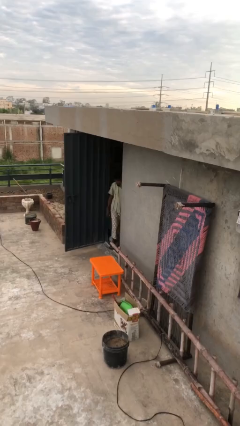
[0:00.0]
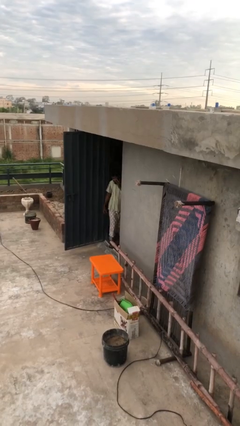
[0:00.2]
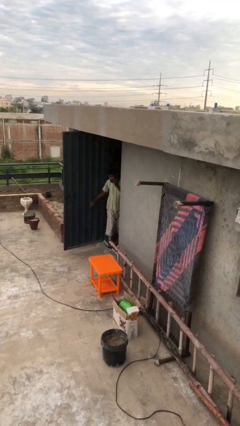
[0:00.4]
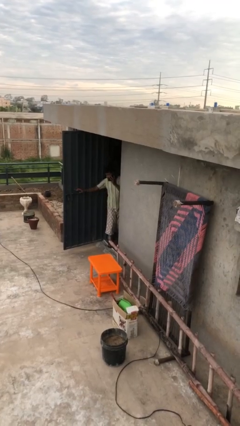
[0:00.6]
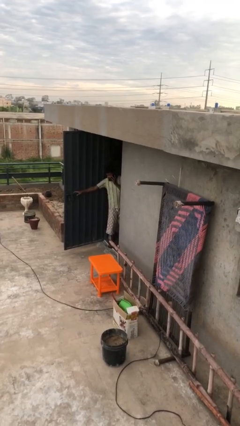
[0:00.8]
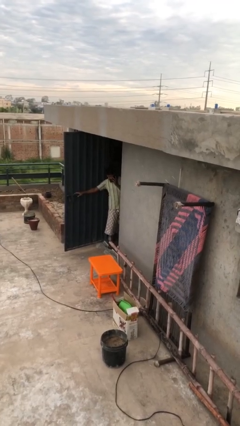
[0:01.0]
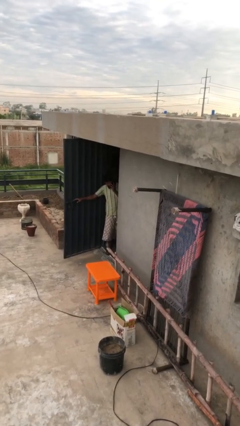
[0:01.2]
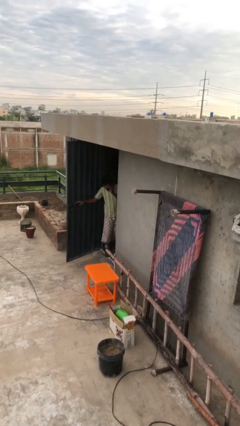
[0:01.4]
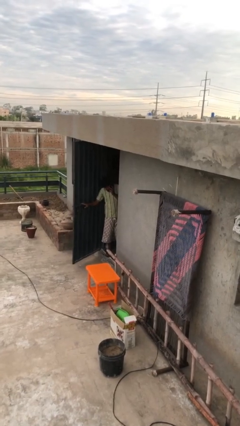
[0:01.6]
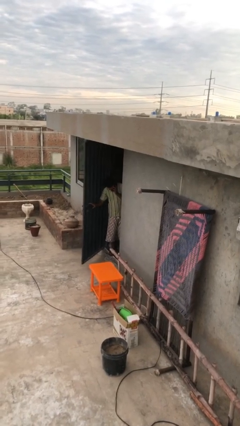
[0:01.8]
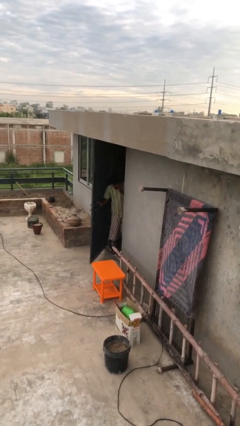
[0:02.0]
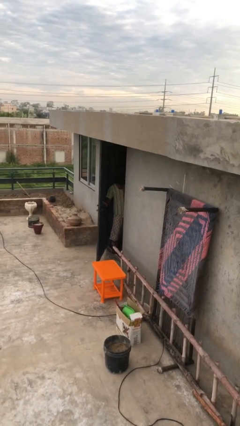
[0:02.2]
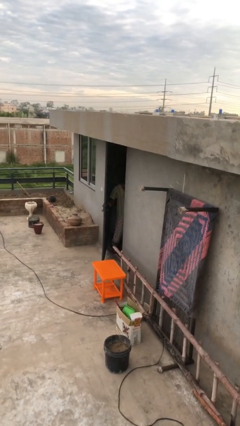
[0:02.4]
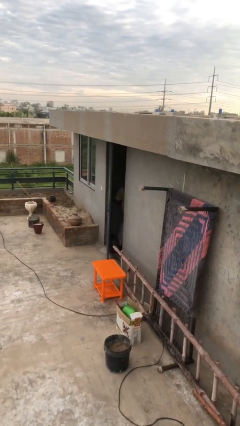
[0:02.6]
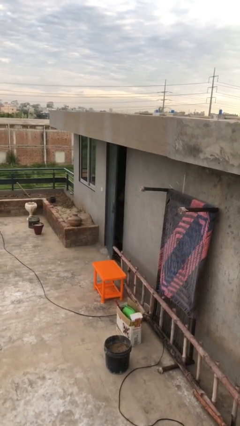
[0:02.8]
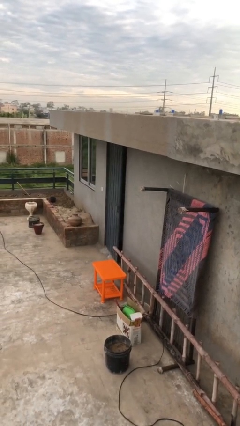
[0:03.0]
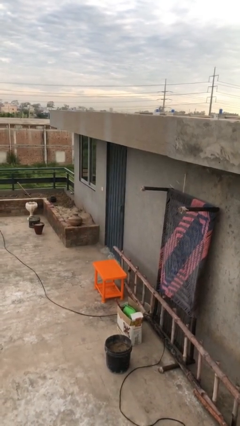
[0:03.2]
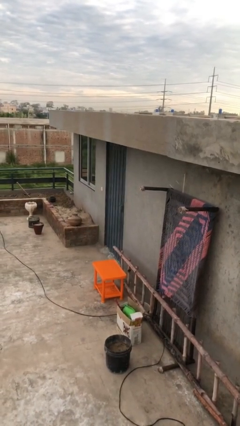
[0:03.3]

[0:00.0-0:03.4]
person closes facility door

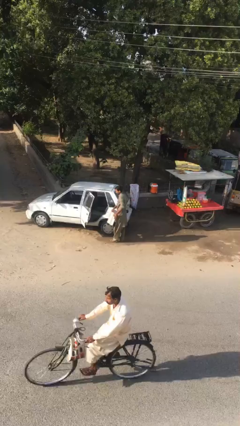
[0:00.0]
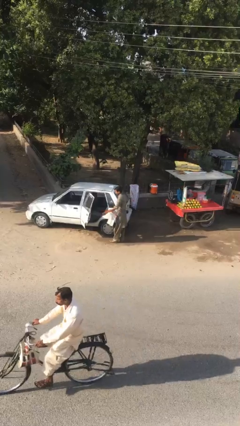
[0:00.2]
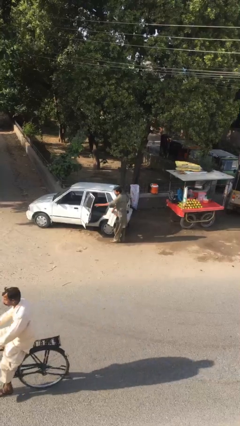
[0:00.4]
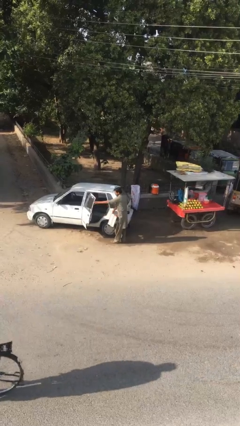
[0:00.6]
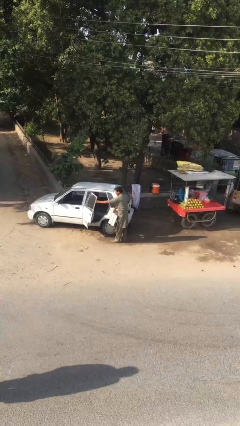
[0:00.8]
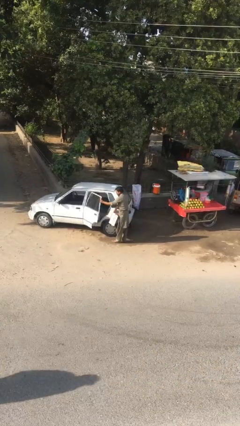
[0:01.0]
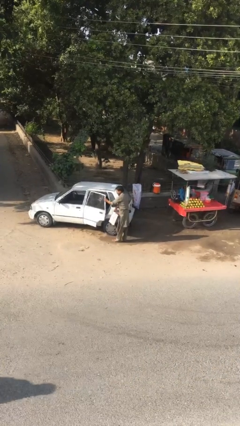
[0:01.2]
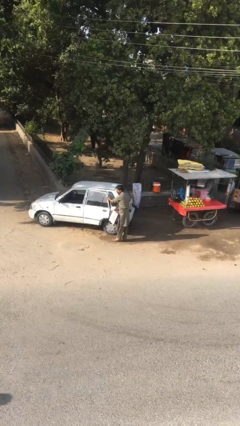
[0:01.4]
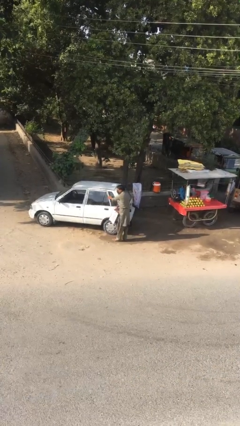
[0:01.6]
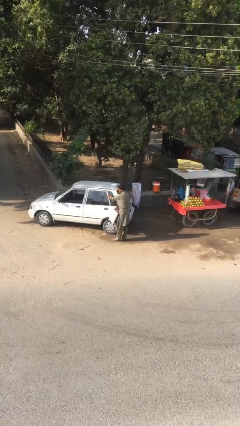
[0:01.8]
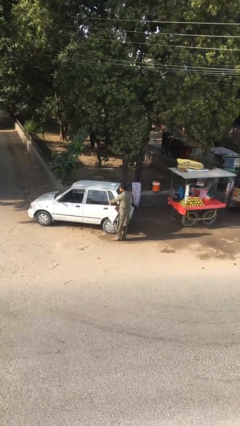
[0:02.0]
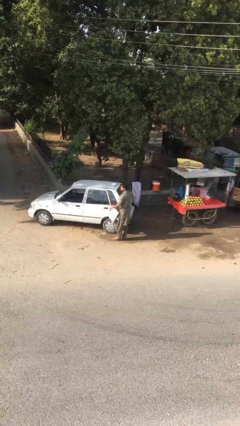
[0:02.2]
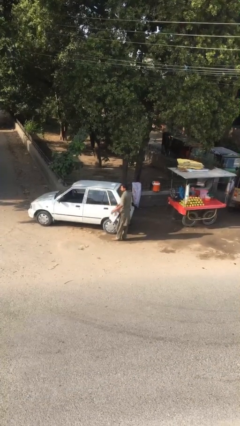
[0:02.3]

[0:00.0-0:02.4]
person closes car door

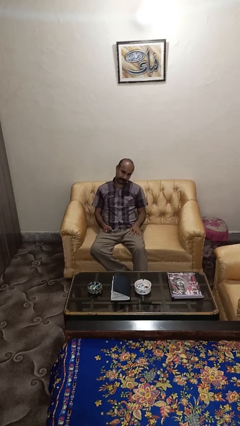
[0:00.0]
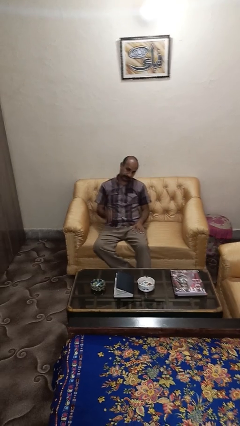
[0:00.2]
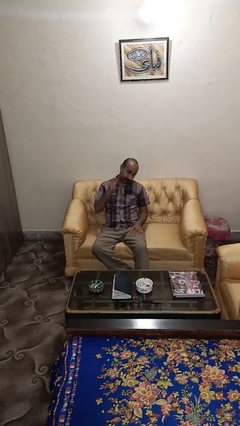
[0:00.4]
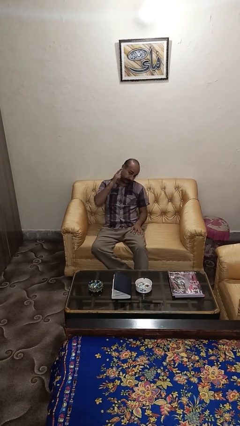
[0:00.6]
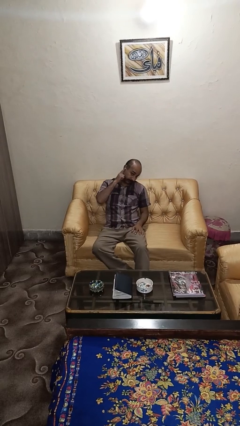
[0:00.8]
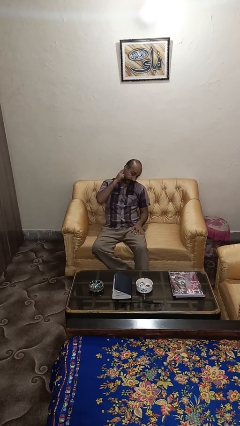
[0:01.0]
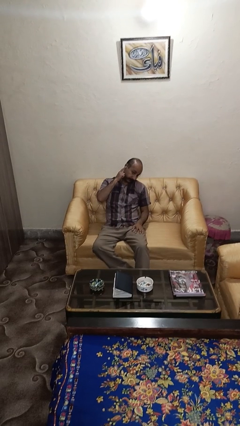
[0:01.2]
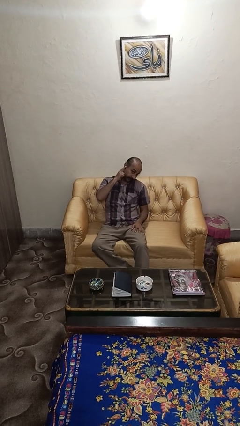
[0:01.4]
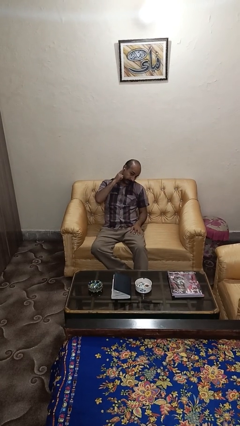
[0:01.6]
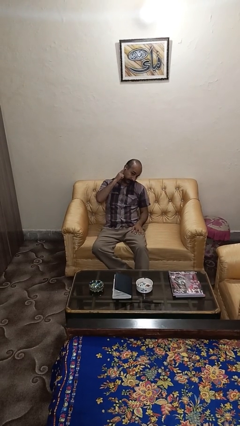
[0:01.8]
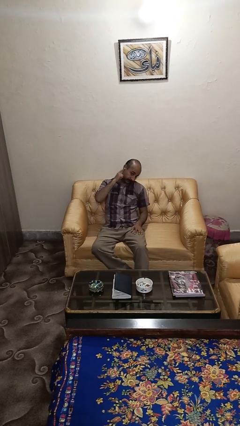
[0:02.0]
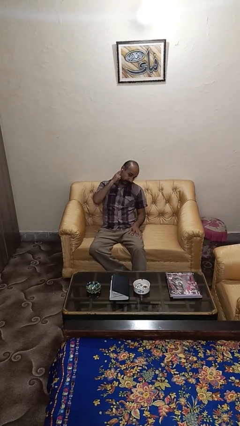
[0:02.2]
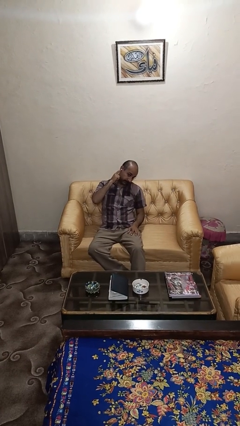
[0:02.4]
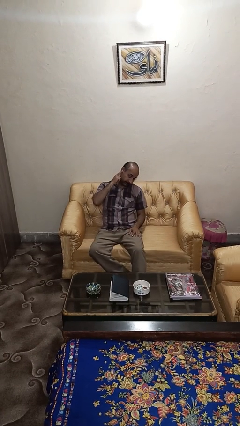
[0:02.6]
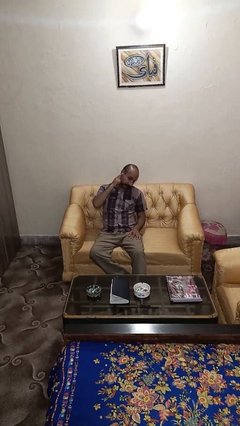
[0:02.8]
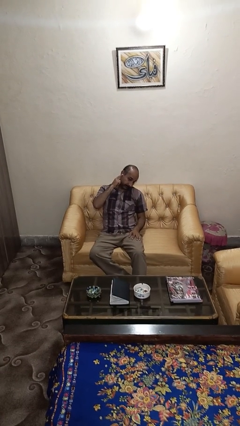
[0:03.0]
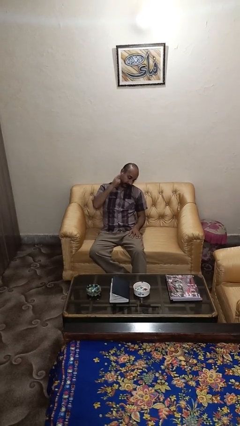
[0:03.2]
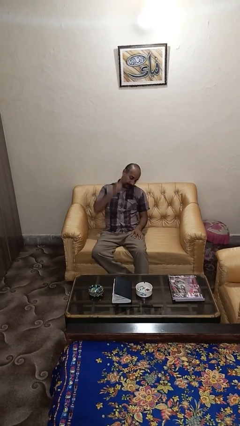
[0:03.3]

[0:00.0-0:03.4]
person gestures listen closely

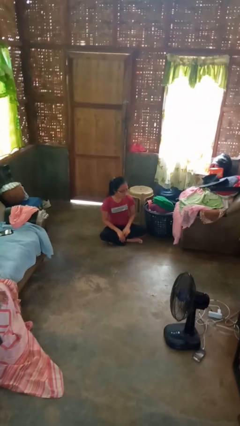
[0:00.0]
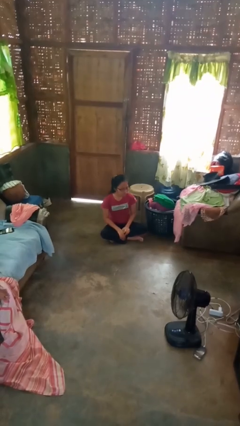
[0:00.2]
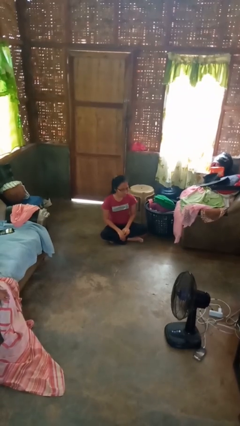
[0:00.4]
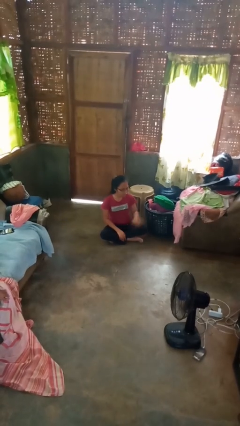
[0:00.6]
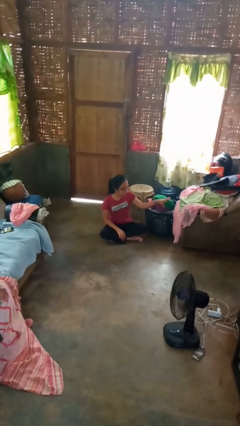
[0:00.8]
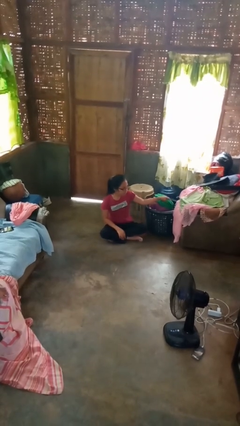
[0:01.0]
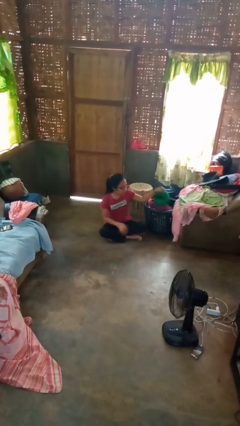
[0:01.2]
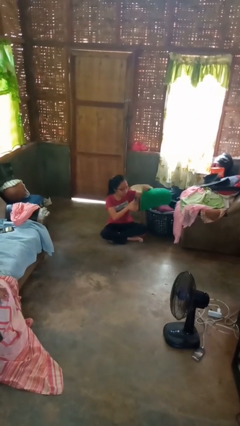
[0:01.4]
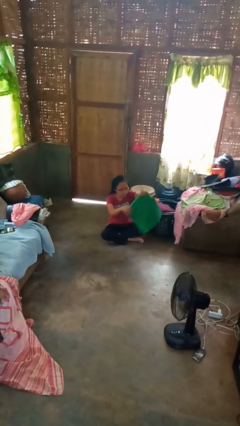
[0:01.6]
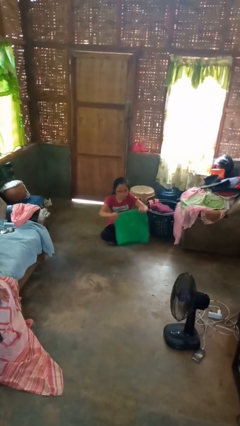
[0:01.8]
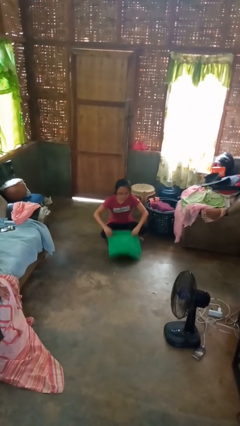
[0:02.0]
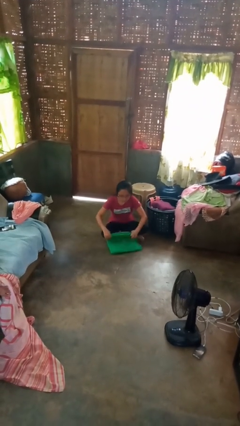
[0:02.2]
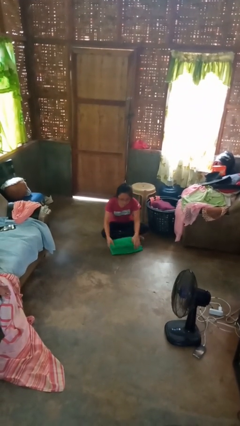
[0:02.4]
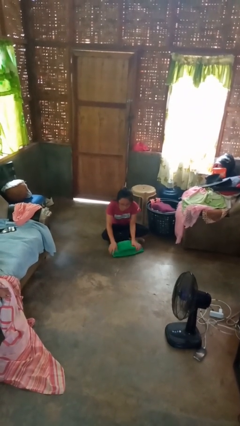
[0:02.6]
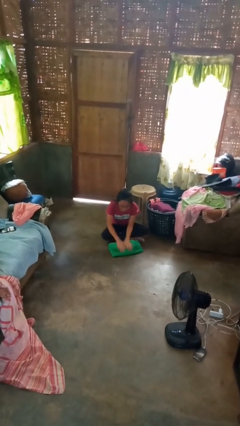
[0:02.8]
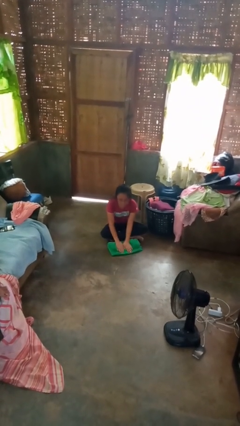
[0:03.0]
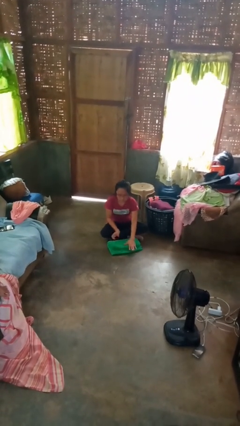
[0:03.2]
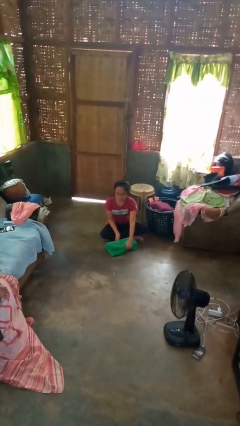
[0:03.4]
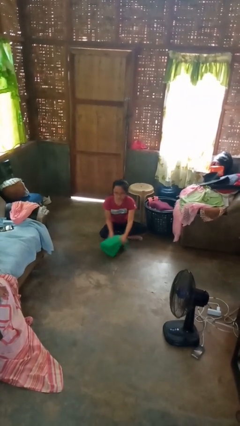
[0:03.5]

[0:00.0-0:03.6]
person folds towel

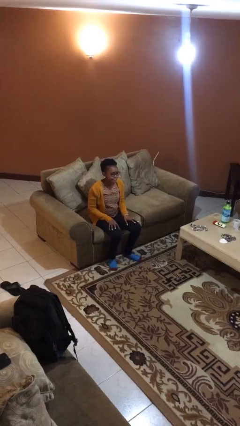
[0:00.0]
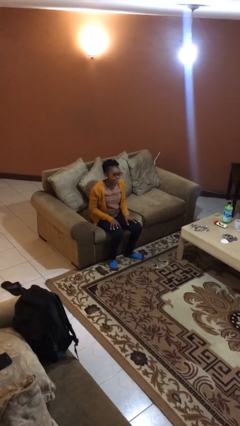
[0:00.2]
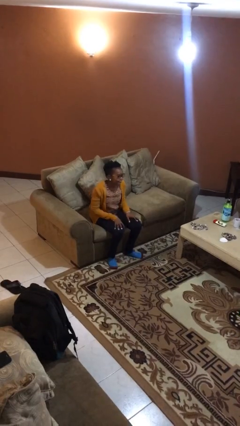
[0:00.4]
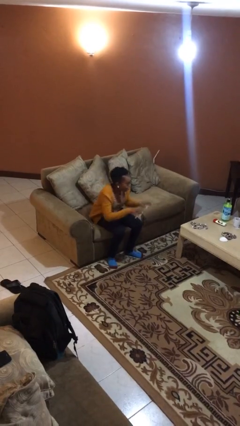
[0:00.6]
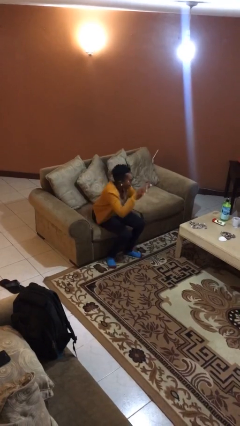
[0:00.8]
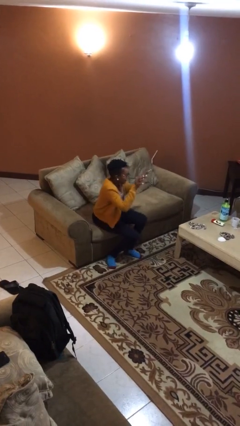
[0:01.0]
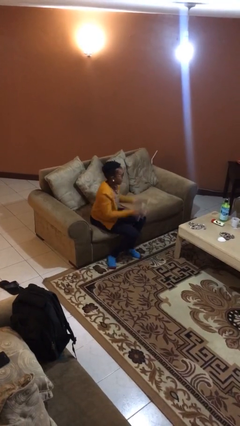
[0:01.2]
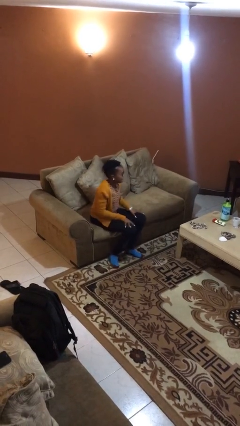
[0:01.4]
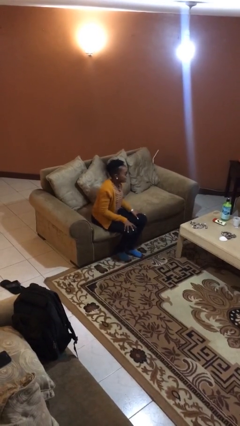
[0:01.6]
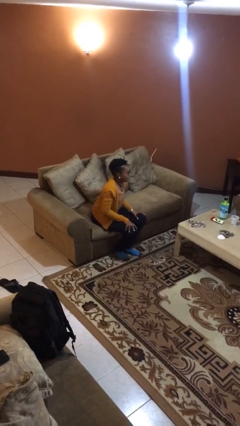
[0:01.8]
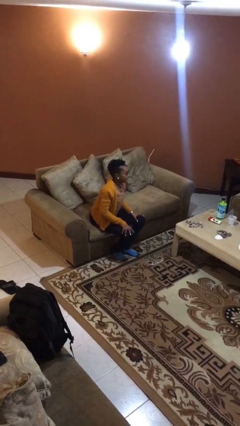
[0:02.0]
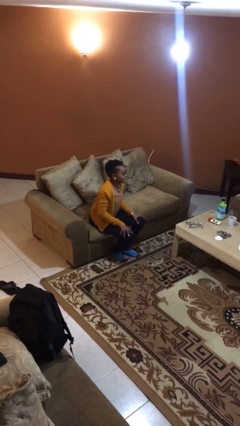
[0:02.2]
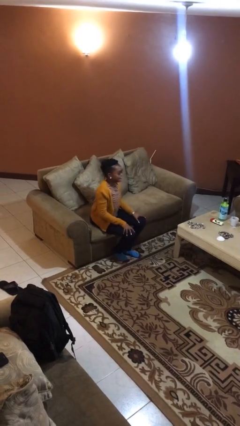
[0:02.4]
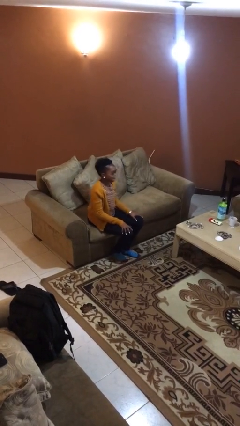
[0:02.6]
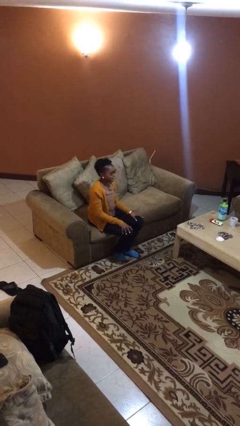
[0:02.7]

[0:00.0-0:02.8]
person slaps hands on thighs

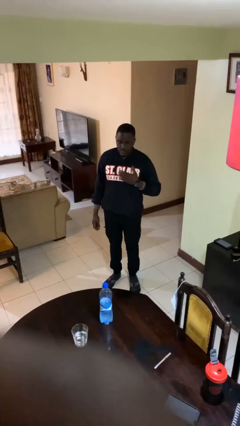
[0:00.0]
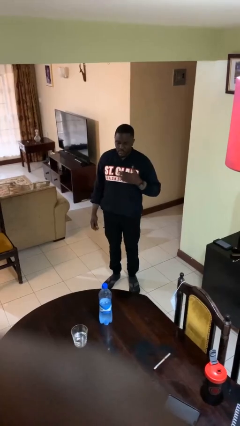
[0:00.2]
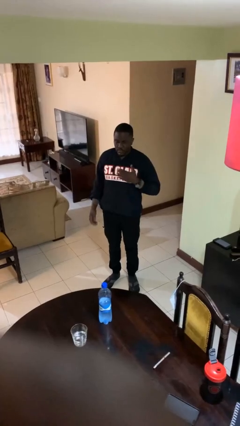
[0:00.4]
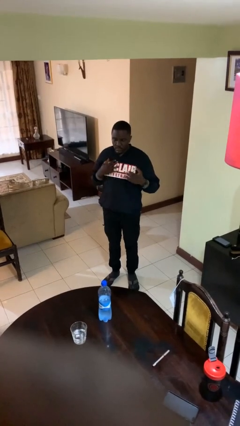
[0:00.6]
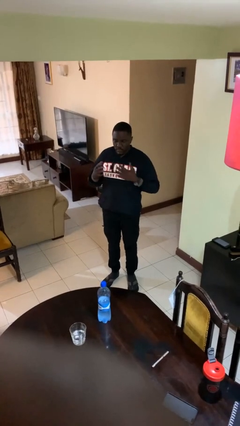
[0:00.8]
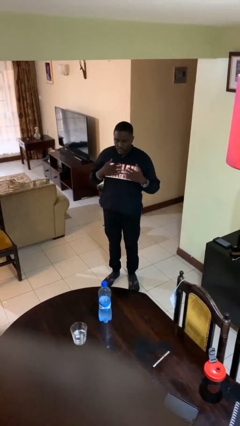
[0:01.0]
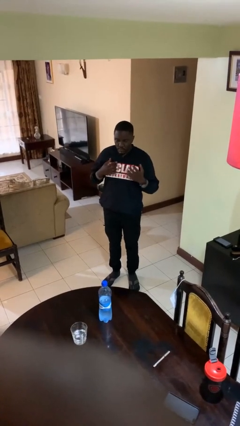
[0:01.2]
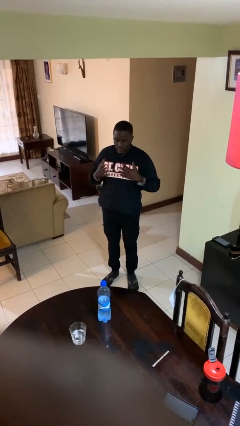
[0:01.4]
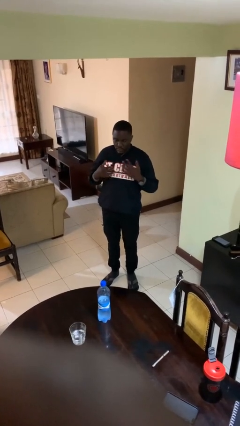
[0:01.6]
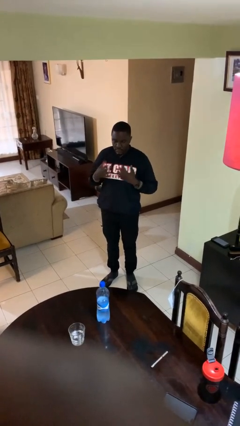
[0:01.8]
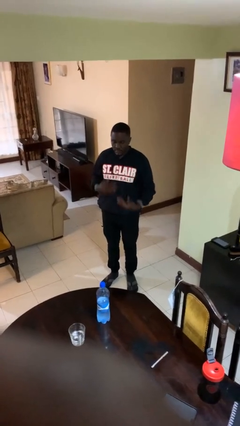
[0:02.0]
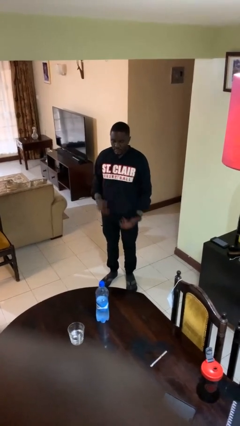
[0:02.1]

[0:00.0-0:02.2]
person drums on chest
